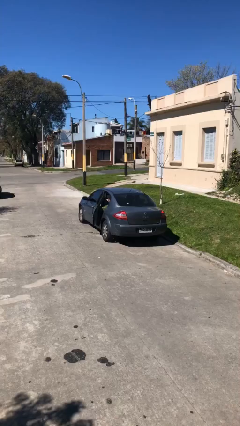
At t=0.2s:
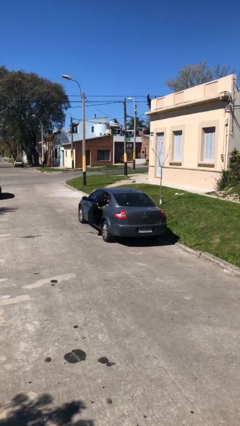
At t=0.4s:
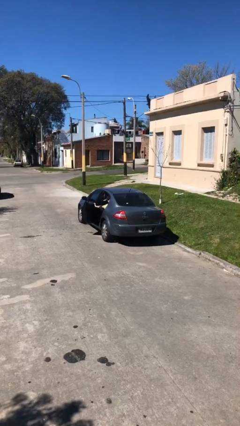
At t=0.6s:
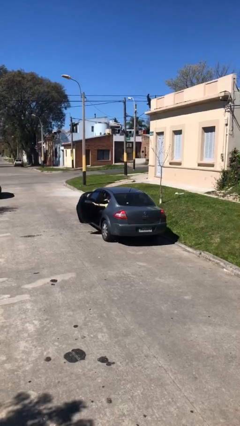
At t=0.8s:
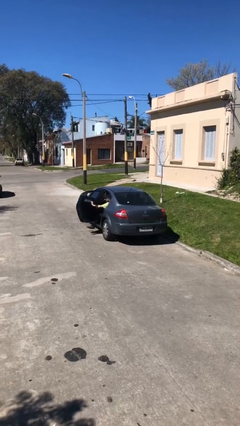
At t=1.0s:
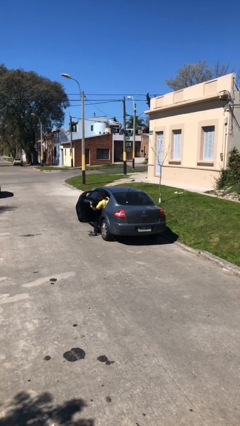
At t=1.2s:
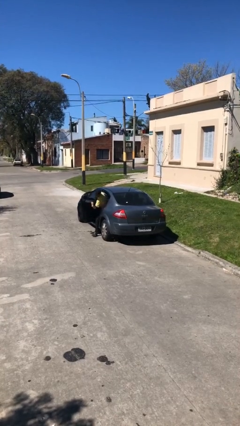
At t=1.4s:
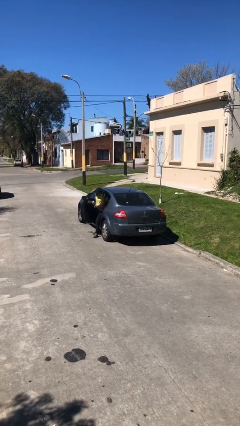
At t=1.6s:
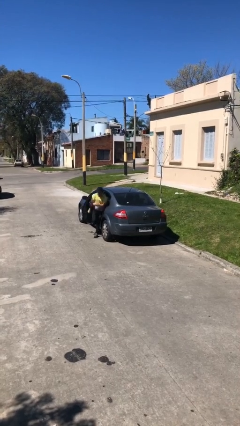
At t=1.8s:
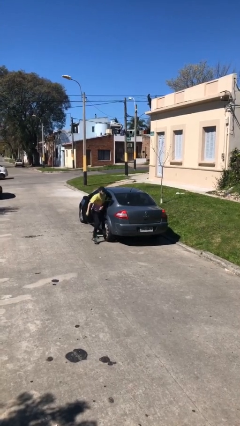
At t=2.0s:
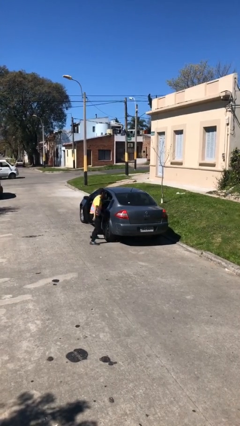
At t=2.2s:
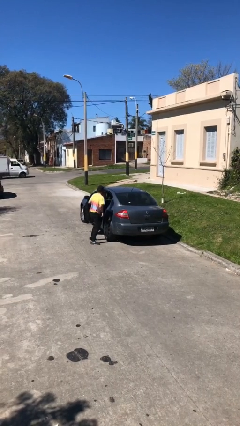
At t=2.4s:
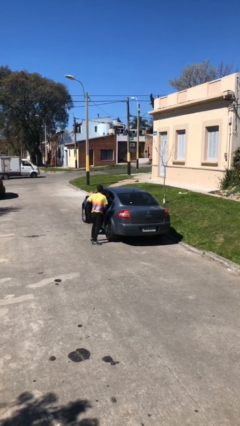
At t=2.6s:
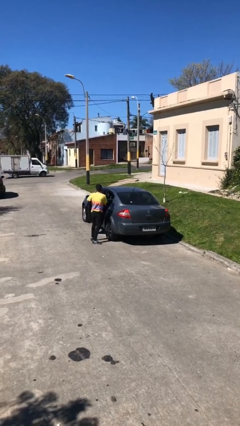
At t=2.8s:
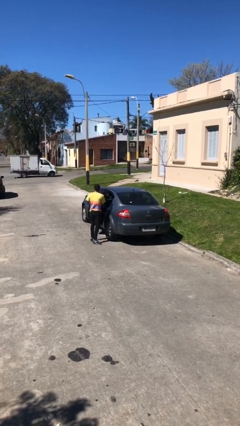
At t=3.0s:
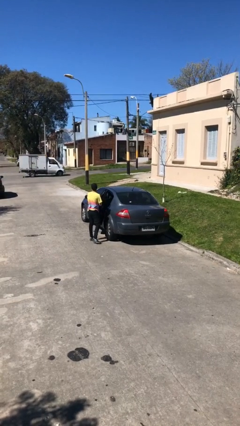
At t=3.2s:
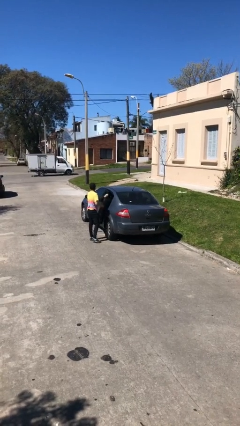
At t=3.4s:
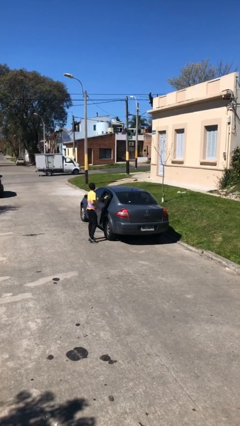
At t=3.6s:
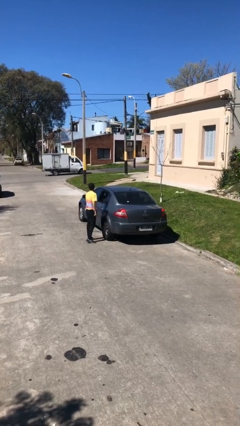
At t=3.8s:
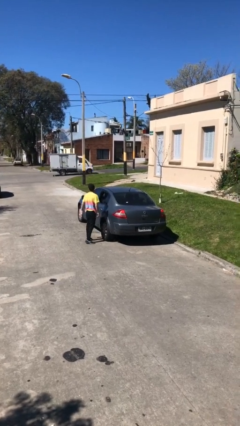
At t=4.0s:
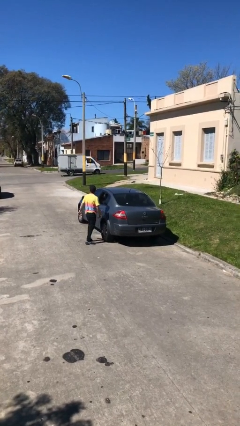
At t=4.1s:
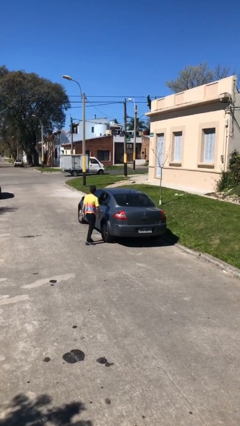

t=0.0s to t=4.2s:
car drops off person

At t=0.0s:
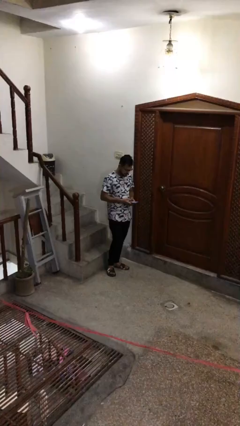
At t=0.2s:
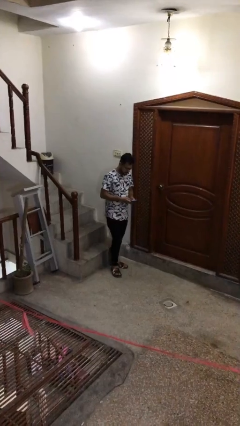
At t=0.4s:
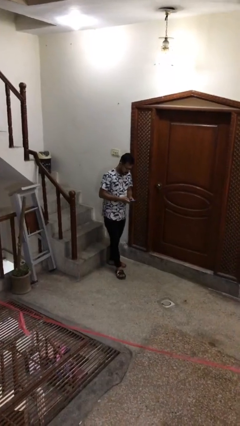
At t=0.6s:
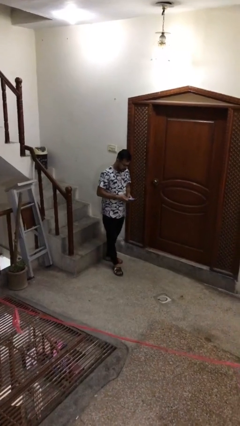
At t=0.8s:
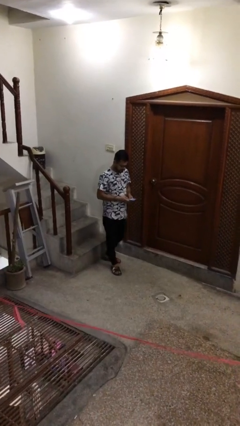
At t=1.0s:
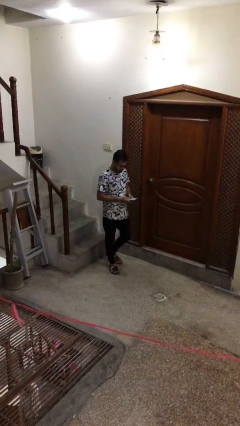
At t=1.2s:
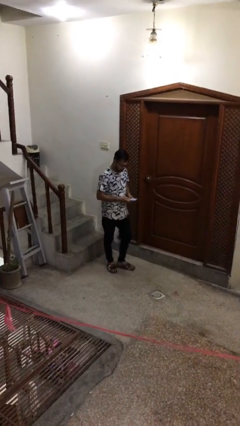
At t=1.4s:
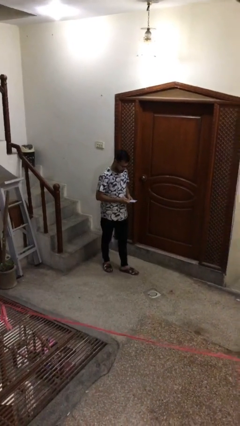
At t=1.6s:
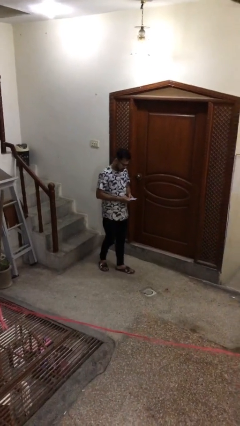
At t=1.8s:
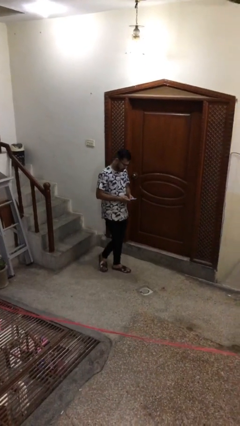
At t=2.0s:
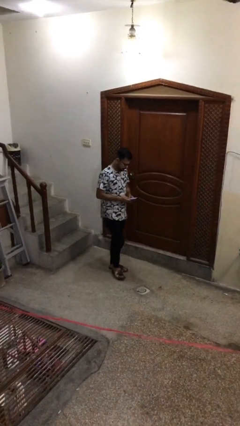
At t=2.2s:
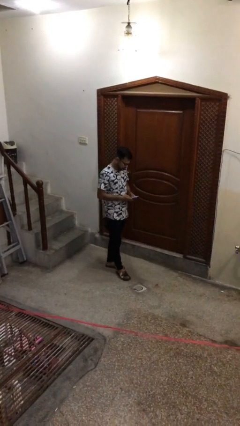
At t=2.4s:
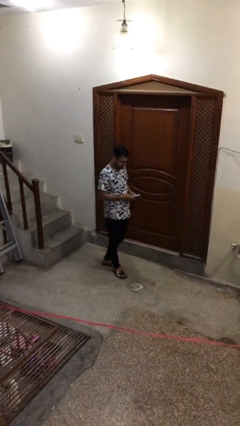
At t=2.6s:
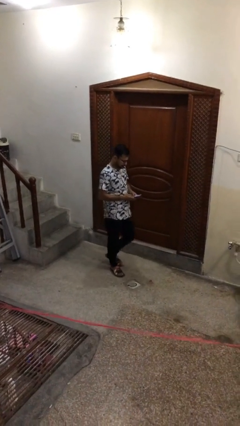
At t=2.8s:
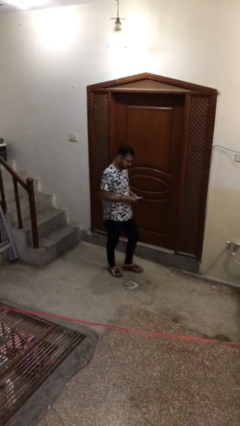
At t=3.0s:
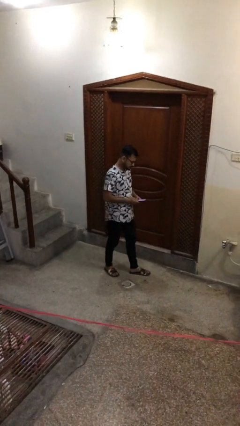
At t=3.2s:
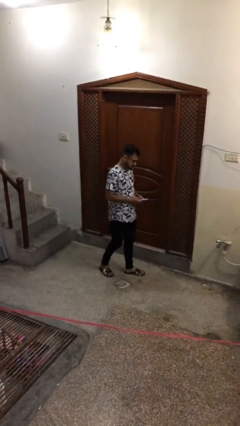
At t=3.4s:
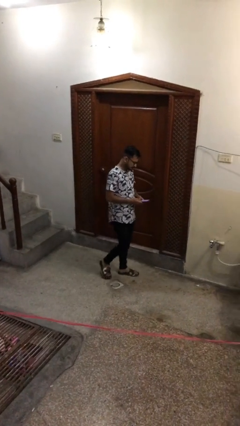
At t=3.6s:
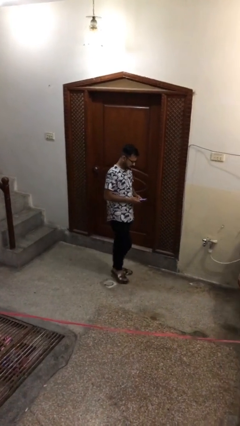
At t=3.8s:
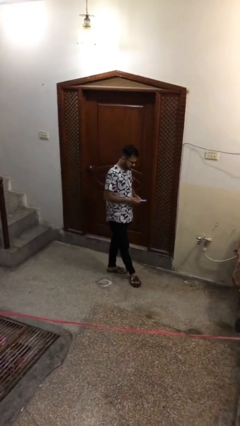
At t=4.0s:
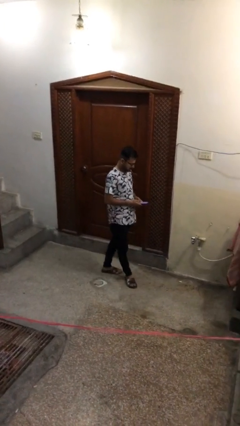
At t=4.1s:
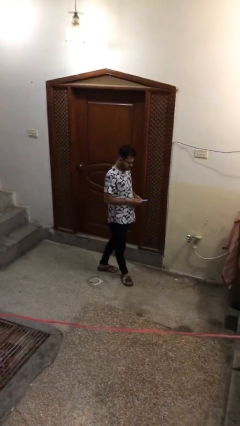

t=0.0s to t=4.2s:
person texts on phone

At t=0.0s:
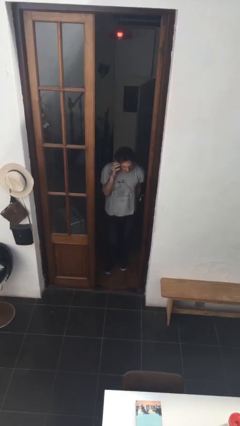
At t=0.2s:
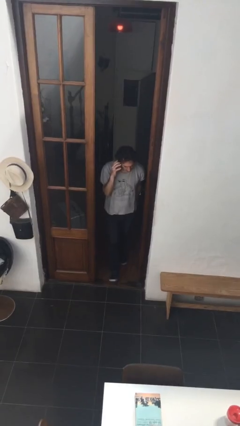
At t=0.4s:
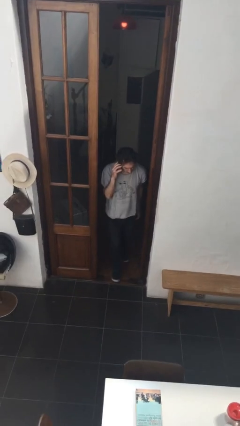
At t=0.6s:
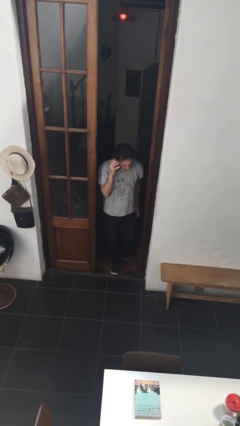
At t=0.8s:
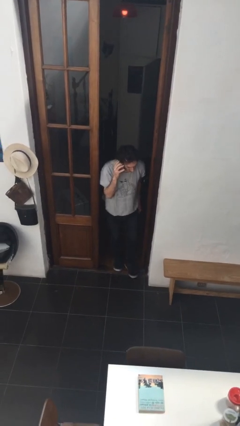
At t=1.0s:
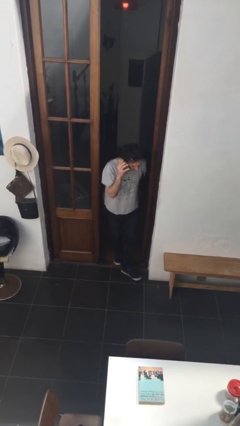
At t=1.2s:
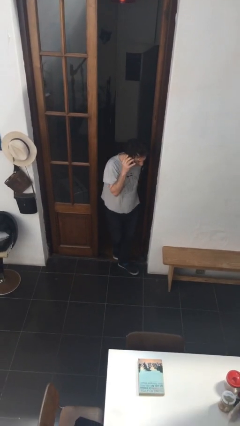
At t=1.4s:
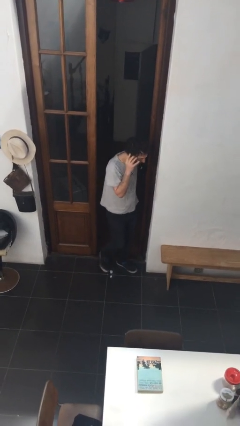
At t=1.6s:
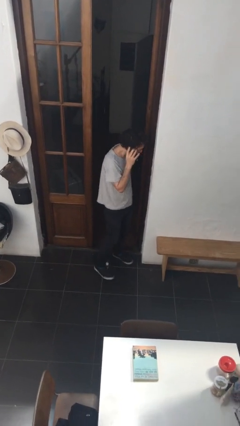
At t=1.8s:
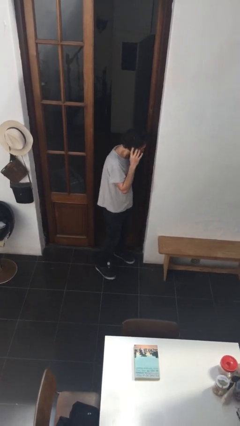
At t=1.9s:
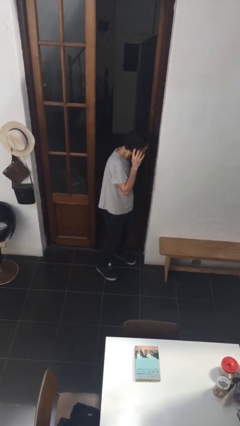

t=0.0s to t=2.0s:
person enters scene through structure

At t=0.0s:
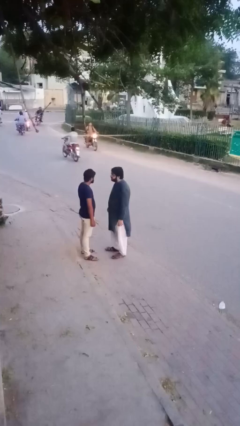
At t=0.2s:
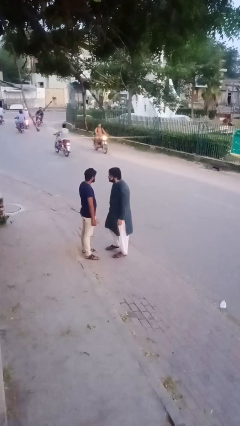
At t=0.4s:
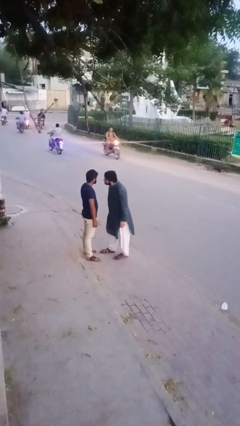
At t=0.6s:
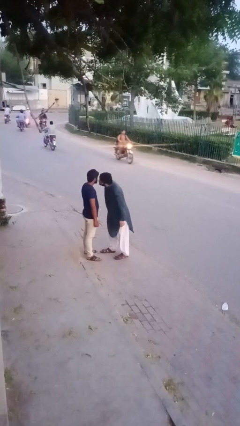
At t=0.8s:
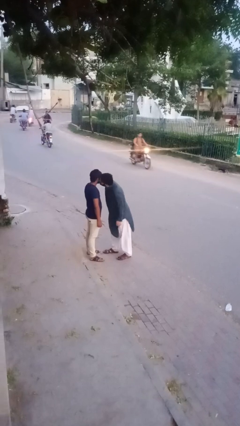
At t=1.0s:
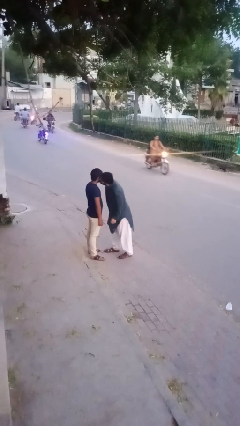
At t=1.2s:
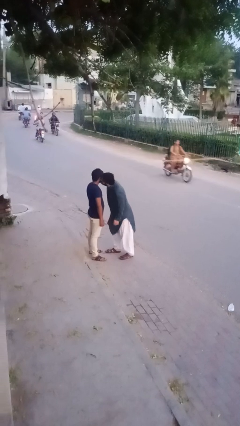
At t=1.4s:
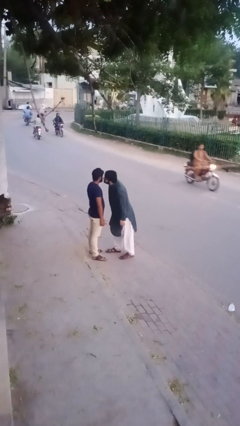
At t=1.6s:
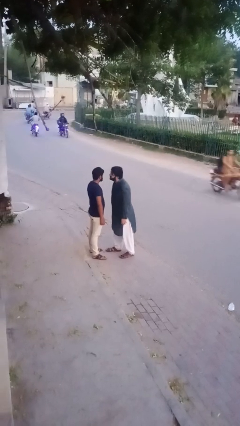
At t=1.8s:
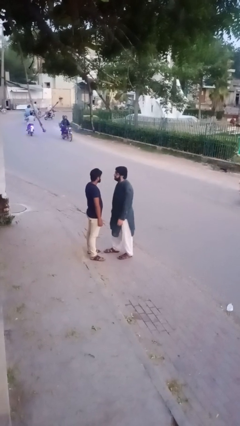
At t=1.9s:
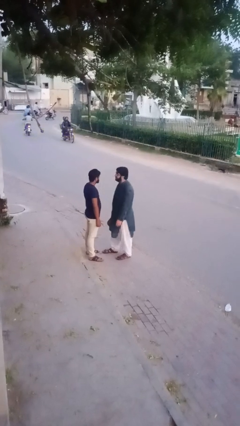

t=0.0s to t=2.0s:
person kisses cheek of person

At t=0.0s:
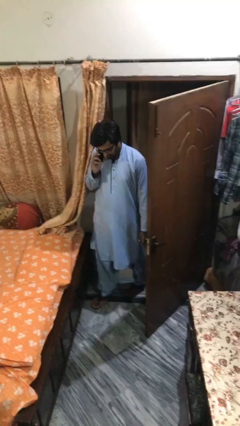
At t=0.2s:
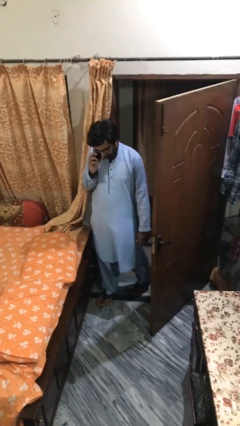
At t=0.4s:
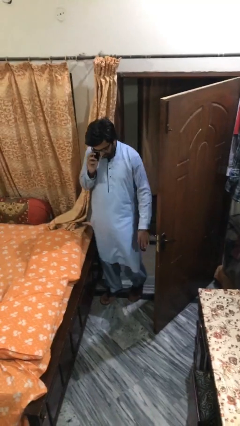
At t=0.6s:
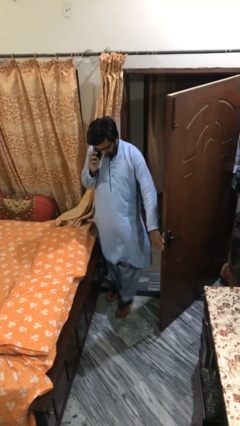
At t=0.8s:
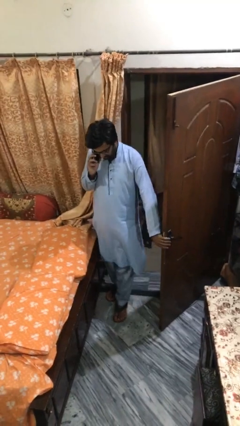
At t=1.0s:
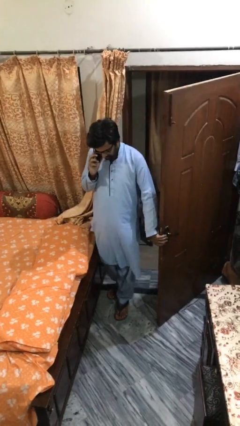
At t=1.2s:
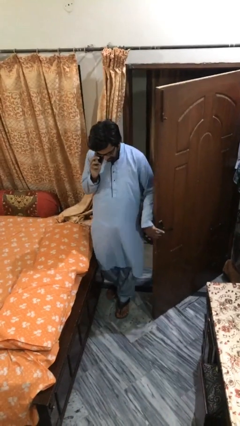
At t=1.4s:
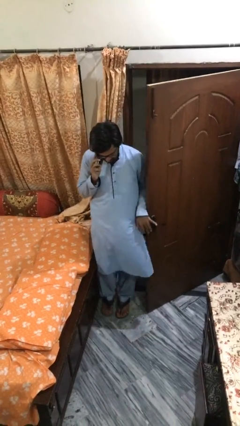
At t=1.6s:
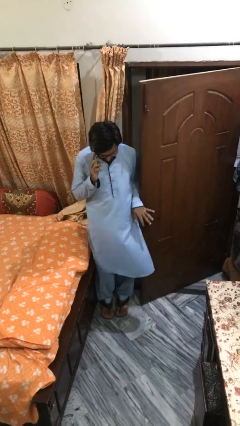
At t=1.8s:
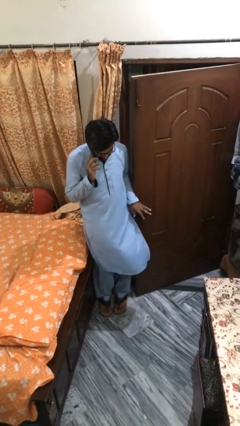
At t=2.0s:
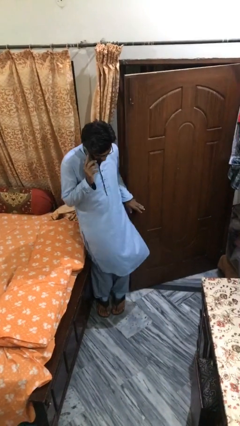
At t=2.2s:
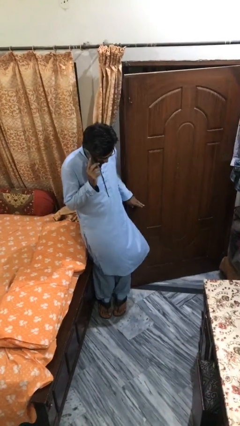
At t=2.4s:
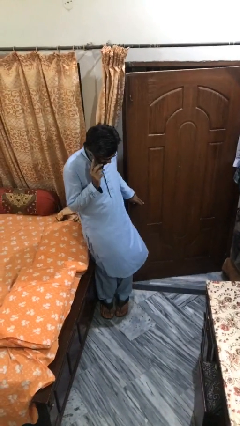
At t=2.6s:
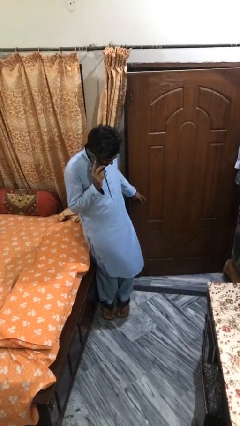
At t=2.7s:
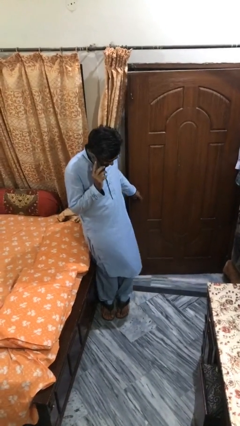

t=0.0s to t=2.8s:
person closes facility door

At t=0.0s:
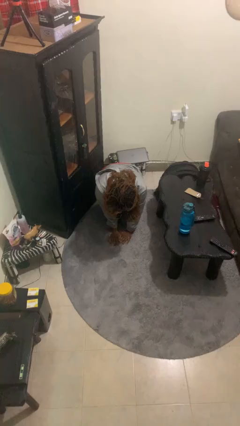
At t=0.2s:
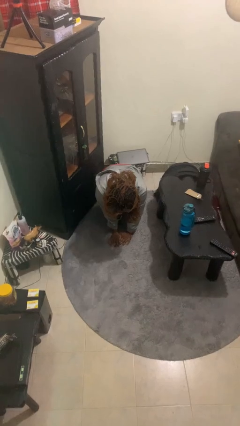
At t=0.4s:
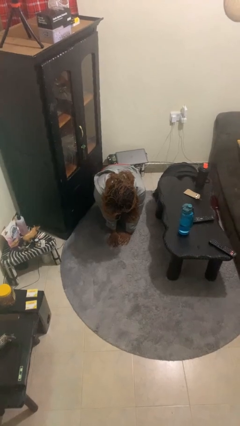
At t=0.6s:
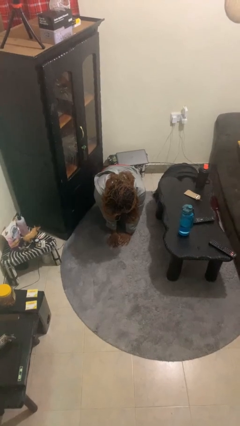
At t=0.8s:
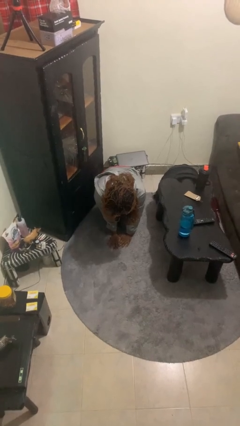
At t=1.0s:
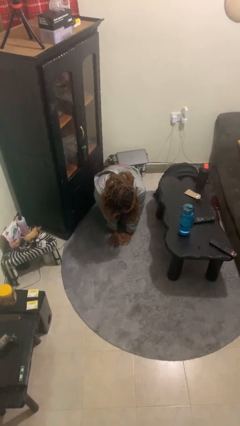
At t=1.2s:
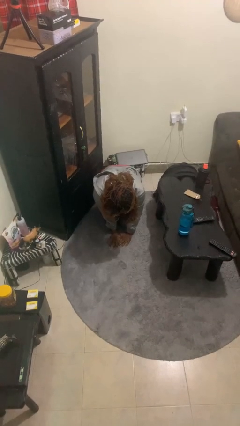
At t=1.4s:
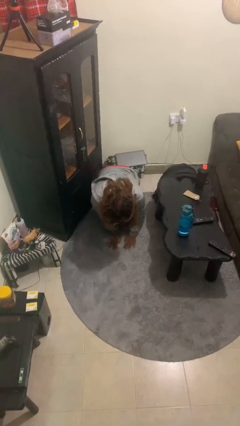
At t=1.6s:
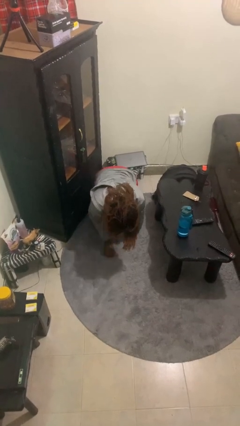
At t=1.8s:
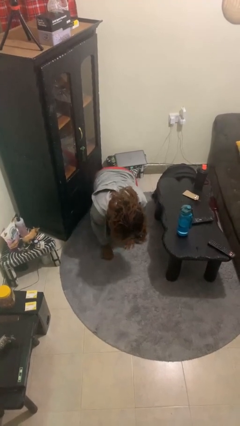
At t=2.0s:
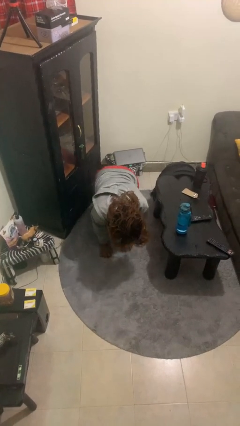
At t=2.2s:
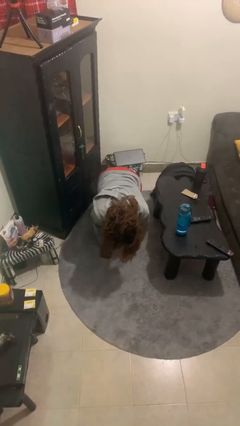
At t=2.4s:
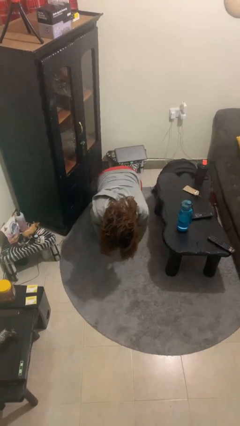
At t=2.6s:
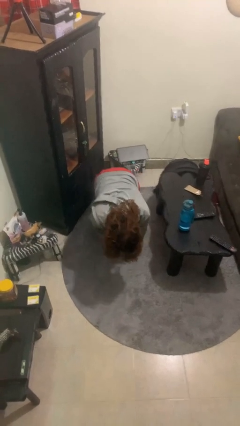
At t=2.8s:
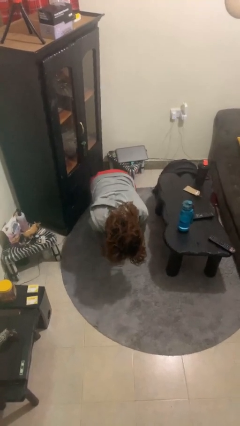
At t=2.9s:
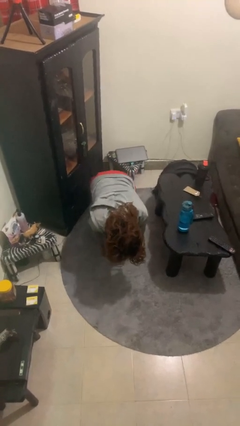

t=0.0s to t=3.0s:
person crawls
